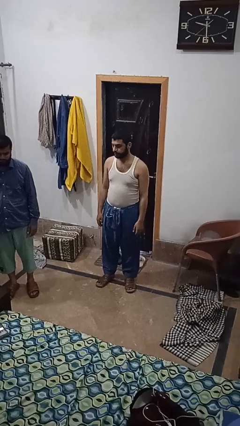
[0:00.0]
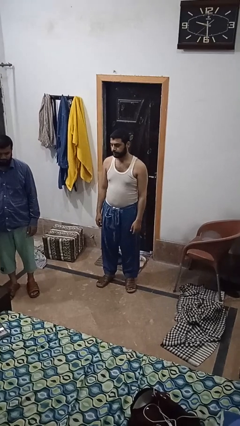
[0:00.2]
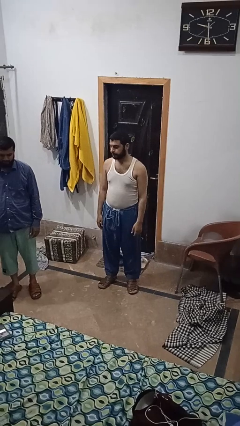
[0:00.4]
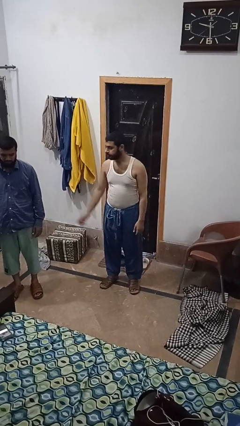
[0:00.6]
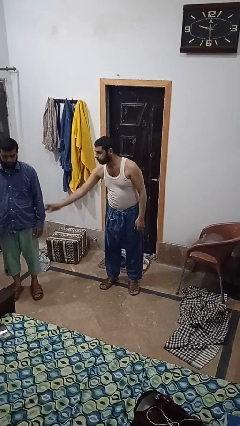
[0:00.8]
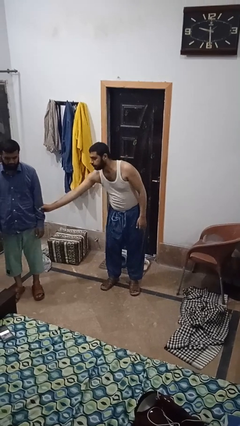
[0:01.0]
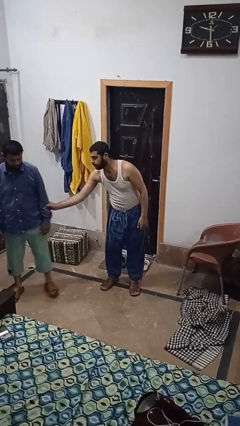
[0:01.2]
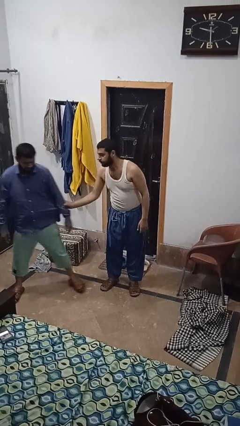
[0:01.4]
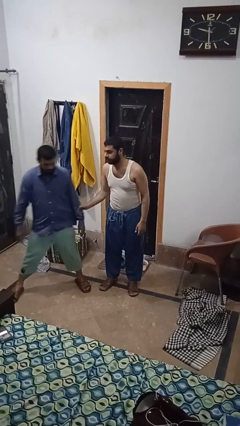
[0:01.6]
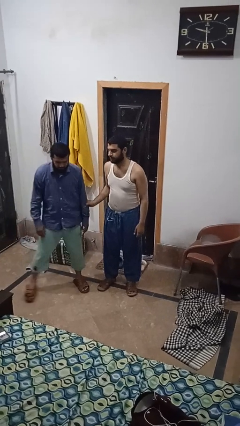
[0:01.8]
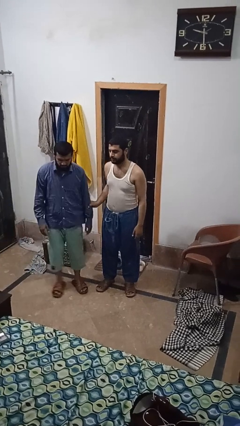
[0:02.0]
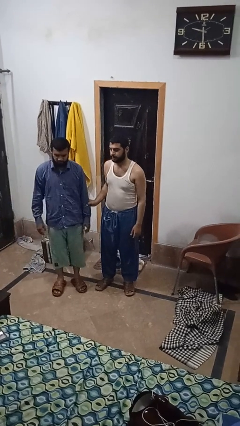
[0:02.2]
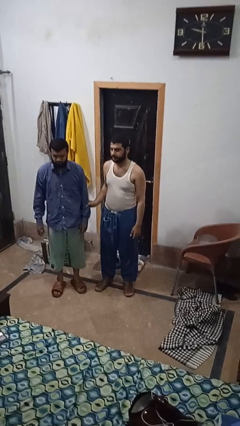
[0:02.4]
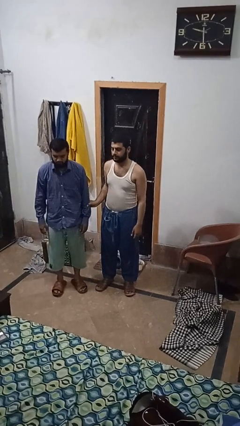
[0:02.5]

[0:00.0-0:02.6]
person grabs person by forearm

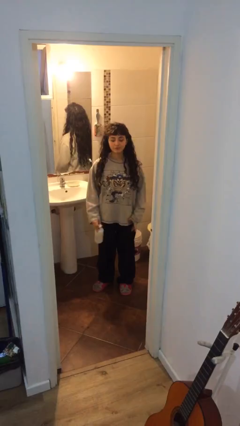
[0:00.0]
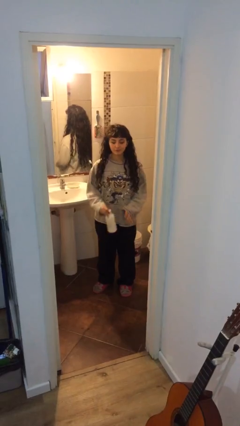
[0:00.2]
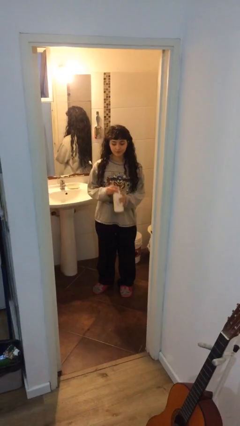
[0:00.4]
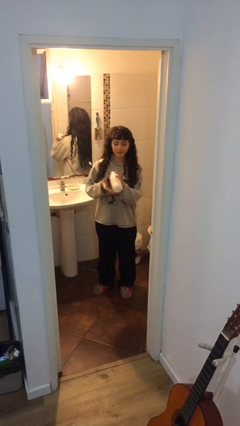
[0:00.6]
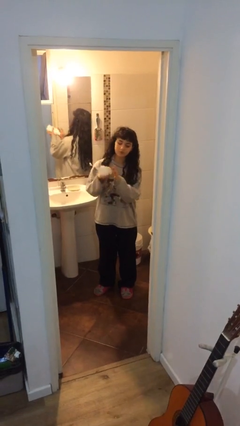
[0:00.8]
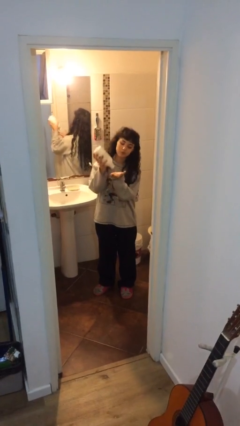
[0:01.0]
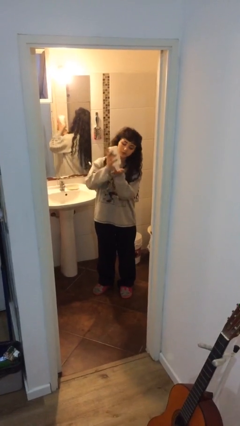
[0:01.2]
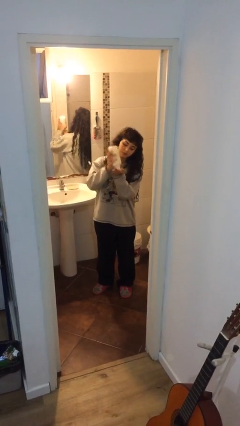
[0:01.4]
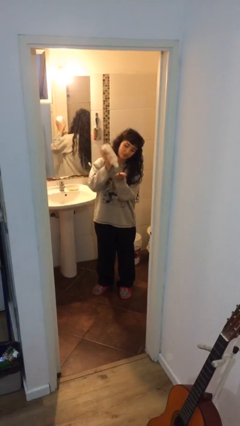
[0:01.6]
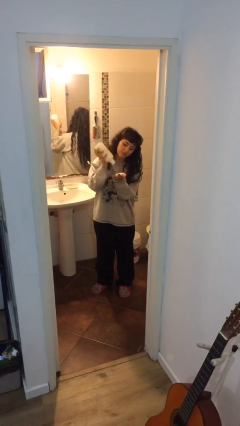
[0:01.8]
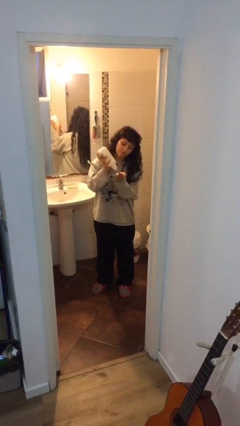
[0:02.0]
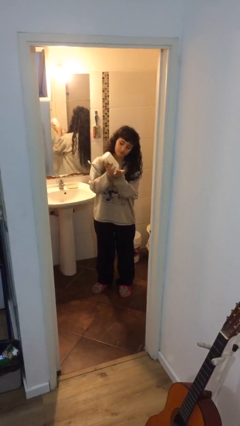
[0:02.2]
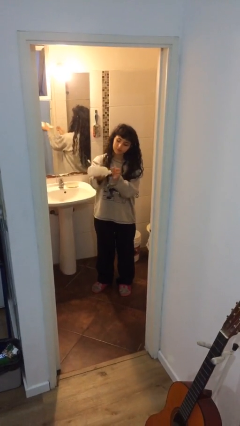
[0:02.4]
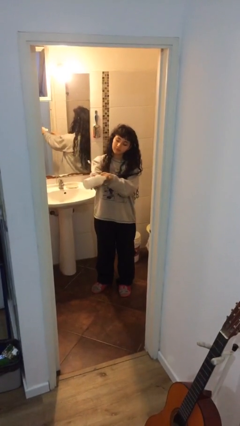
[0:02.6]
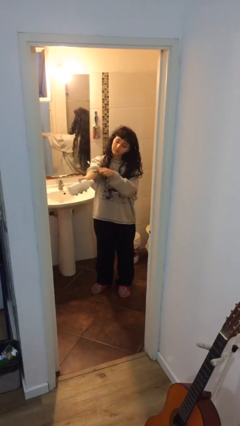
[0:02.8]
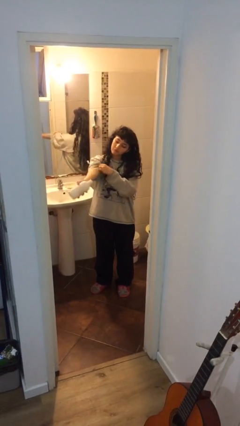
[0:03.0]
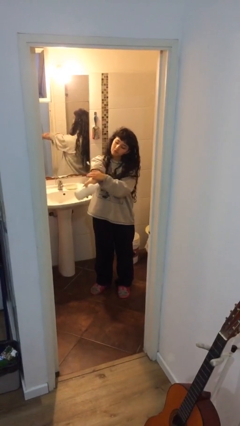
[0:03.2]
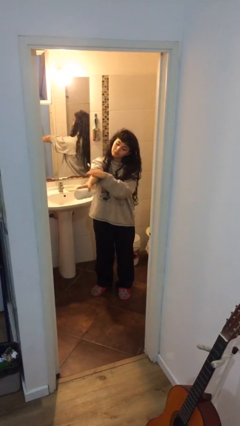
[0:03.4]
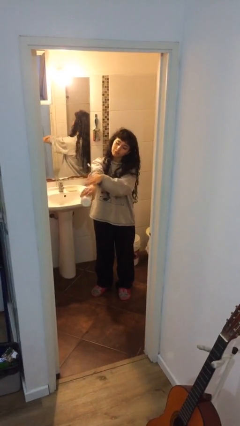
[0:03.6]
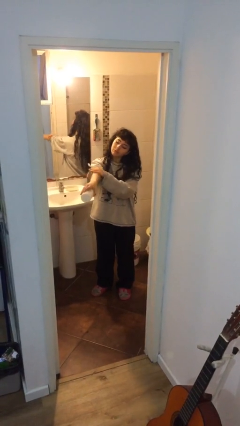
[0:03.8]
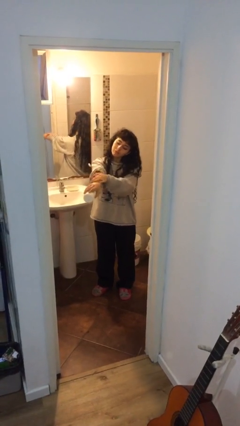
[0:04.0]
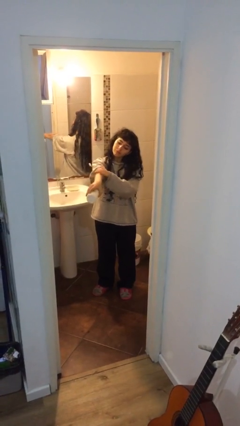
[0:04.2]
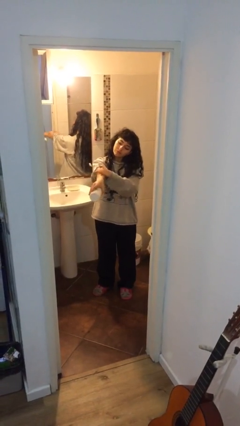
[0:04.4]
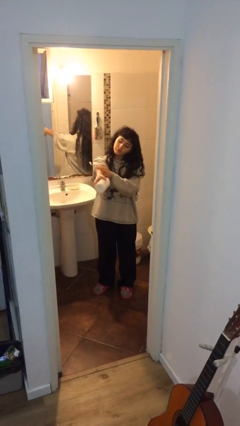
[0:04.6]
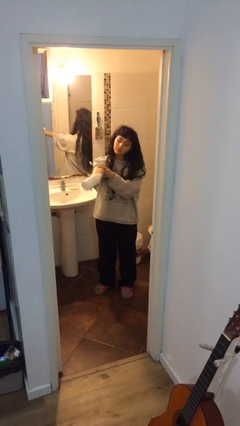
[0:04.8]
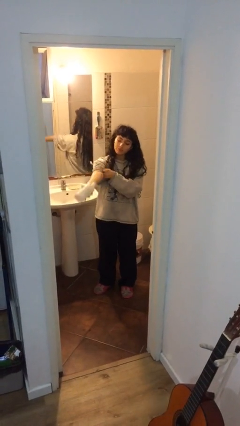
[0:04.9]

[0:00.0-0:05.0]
person applies sunscreen

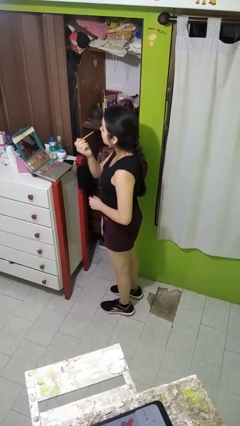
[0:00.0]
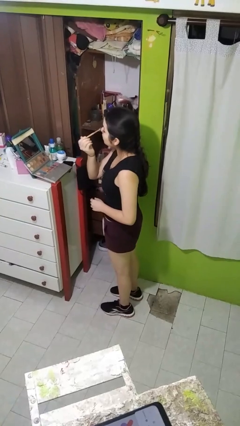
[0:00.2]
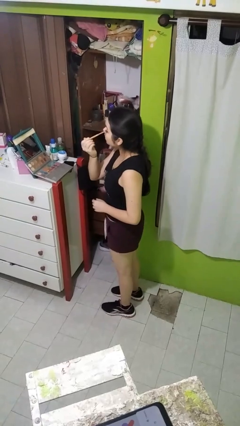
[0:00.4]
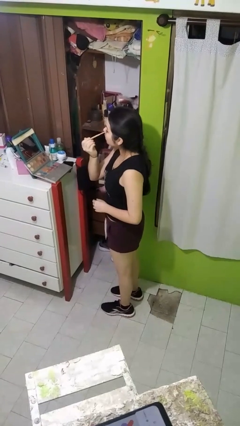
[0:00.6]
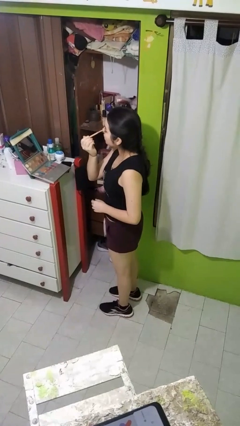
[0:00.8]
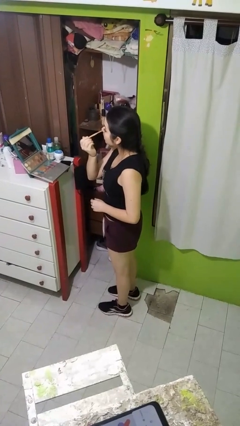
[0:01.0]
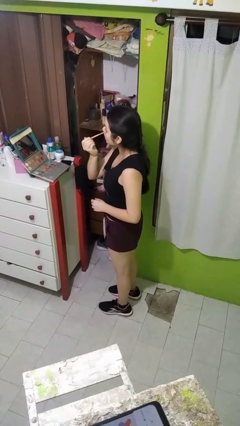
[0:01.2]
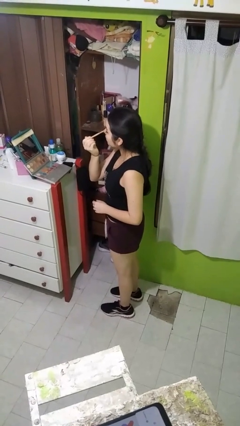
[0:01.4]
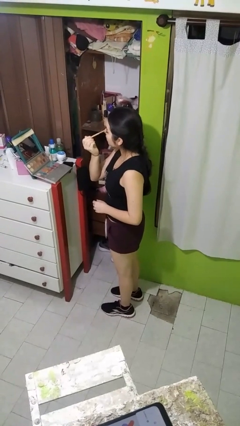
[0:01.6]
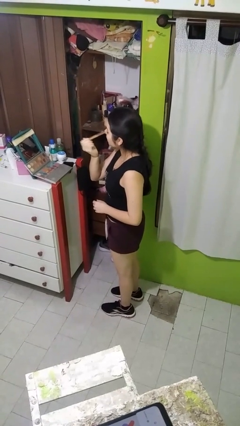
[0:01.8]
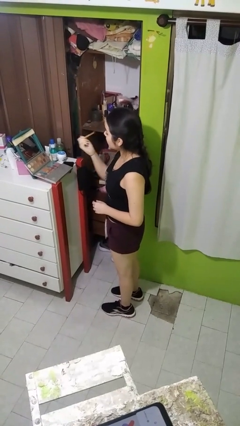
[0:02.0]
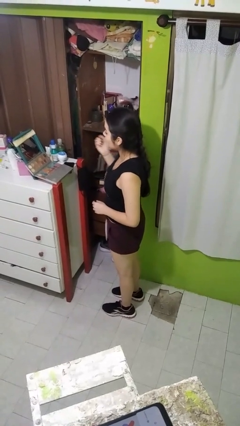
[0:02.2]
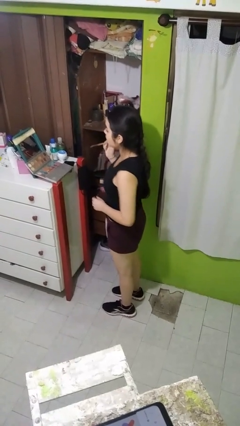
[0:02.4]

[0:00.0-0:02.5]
person applies eye makeup

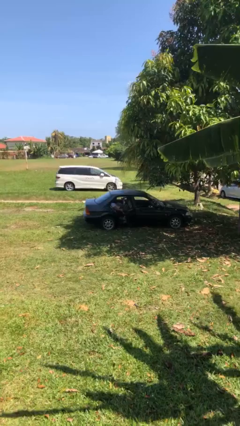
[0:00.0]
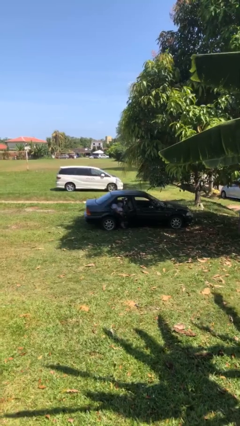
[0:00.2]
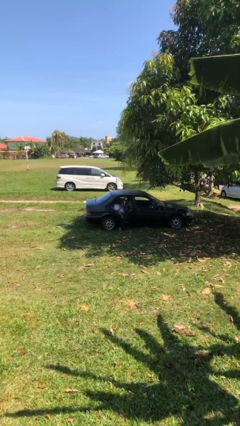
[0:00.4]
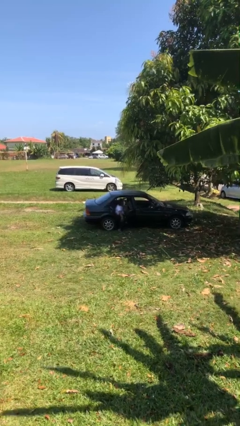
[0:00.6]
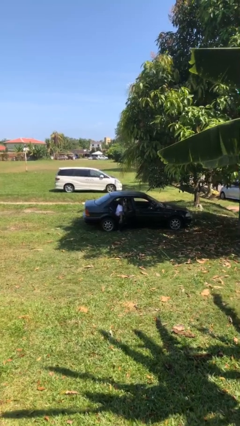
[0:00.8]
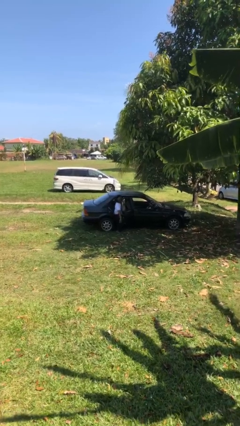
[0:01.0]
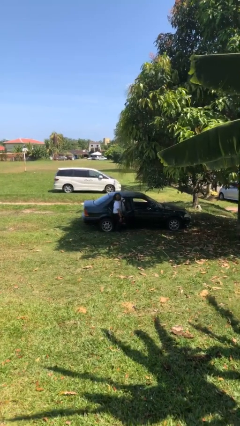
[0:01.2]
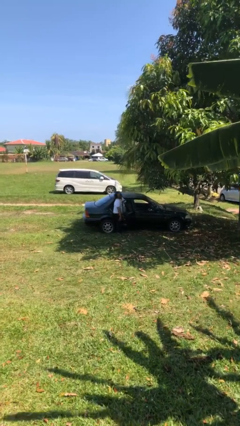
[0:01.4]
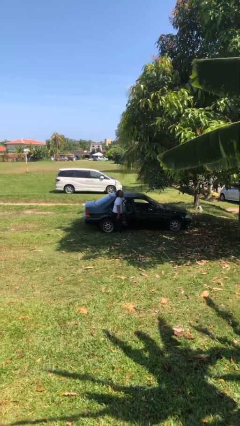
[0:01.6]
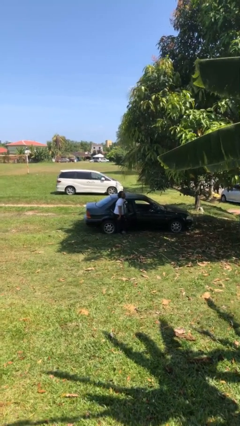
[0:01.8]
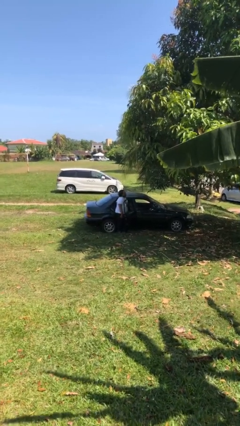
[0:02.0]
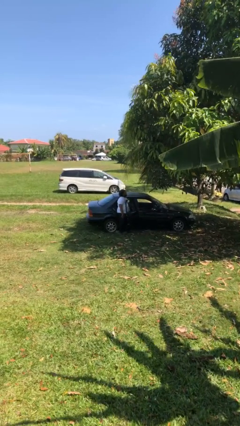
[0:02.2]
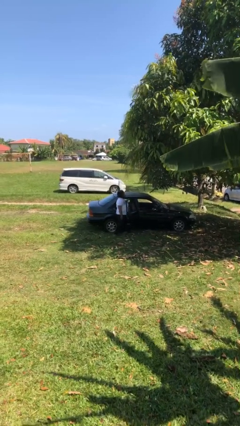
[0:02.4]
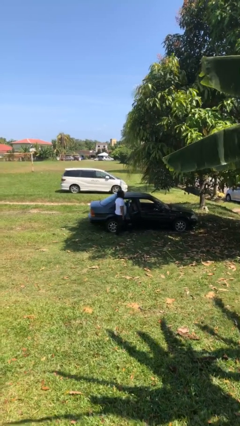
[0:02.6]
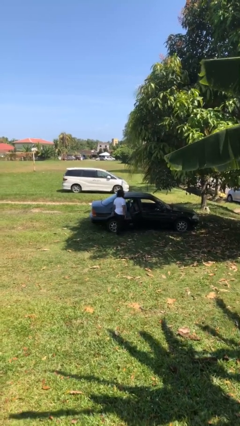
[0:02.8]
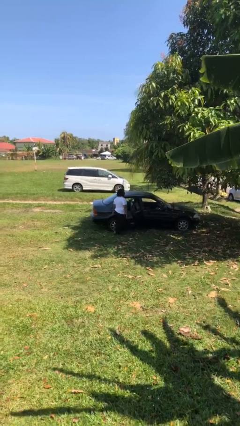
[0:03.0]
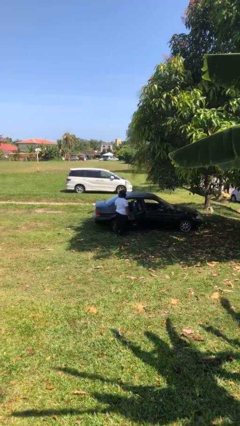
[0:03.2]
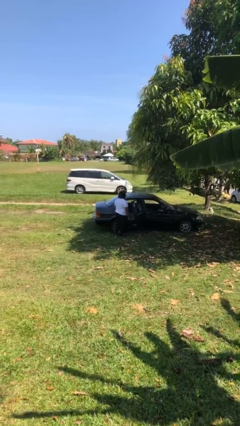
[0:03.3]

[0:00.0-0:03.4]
person exits car

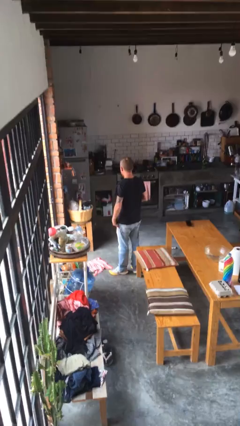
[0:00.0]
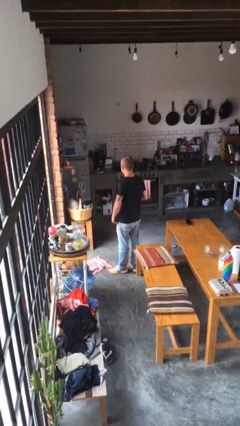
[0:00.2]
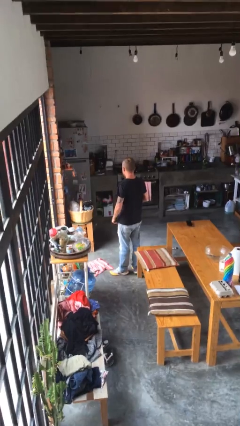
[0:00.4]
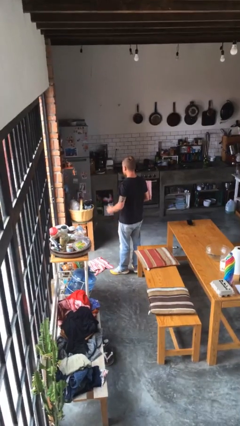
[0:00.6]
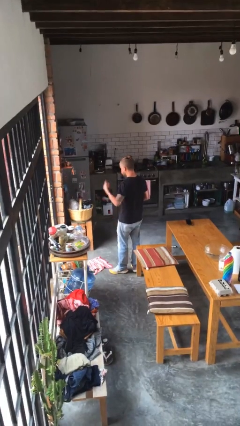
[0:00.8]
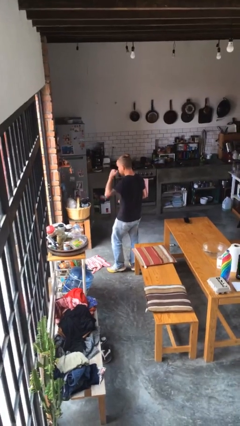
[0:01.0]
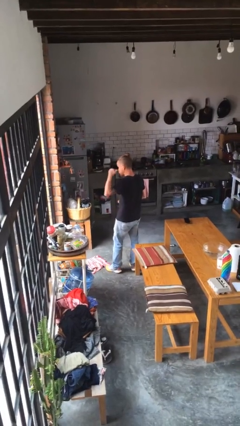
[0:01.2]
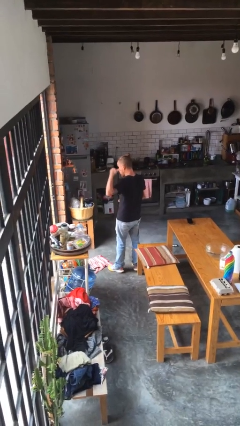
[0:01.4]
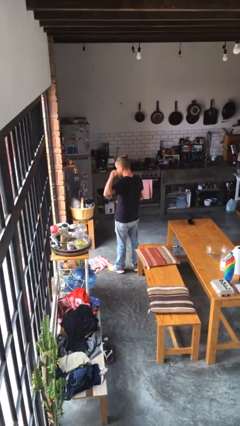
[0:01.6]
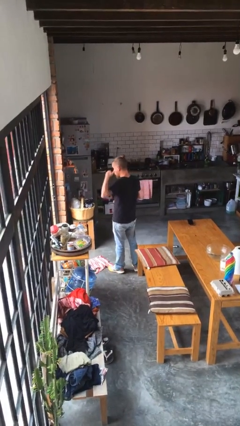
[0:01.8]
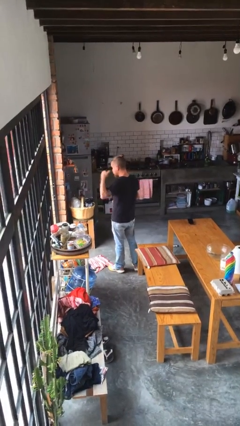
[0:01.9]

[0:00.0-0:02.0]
person gestures call me

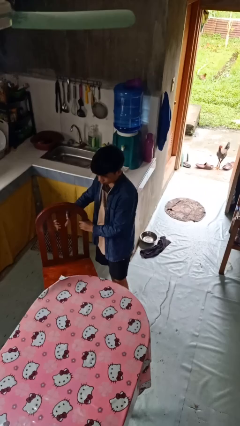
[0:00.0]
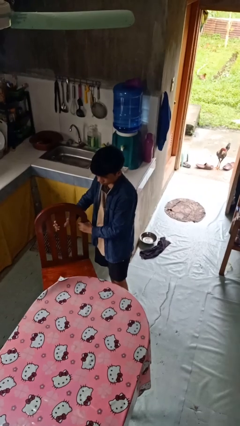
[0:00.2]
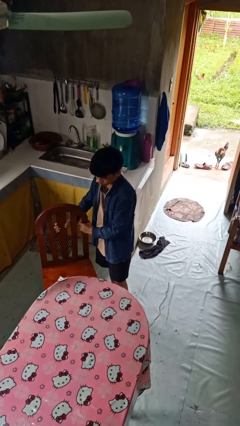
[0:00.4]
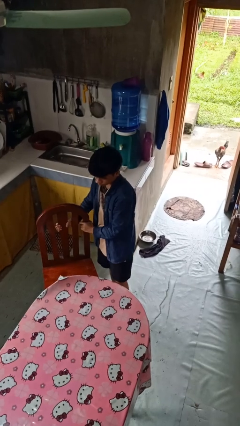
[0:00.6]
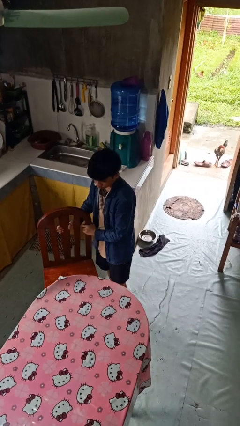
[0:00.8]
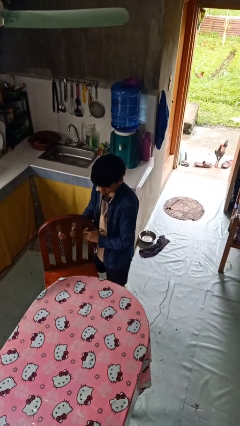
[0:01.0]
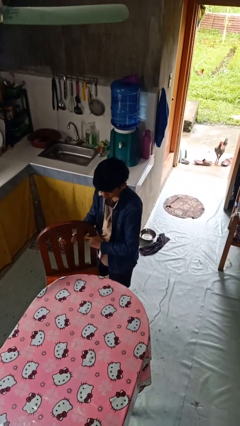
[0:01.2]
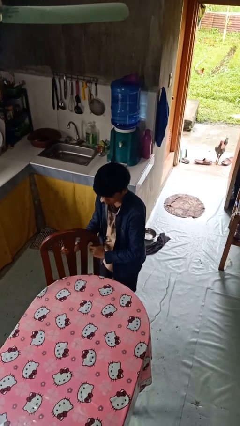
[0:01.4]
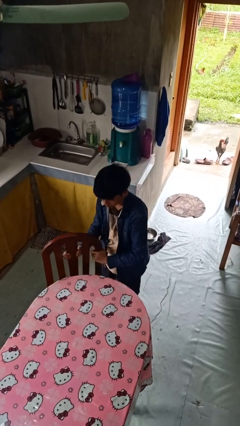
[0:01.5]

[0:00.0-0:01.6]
person pushes in chair
